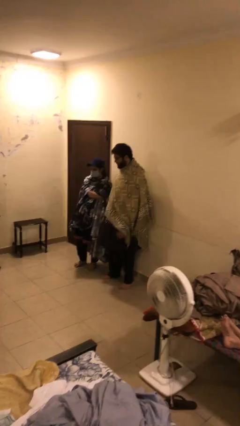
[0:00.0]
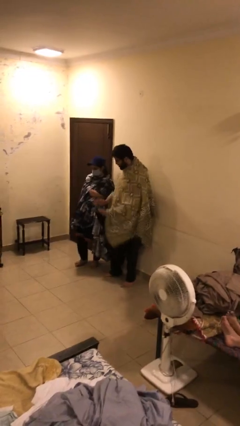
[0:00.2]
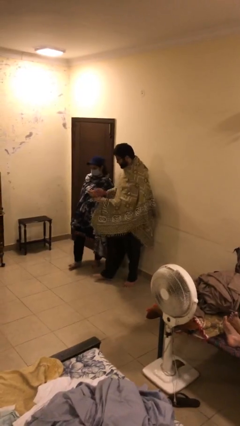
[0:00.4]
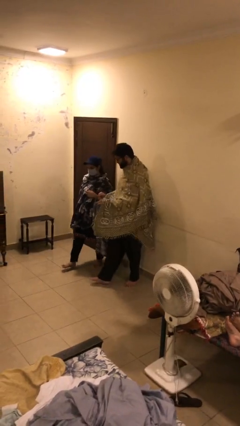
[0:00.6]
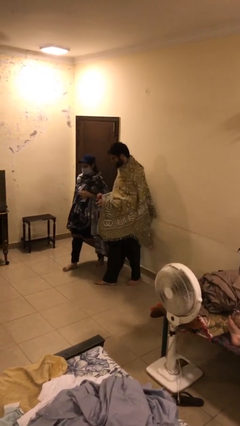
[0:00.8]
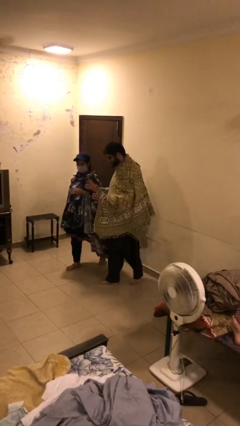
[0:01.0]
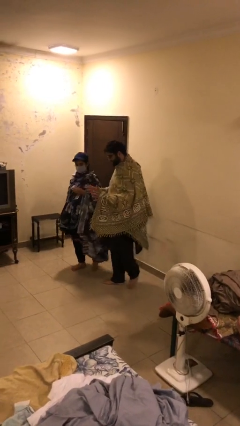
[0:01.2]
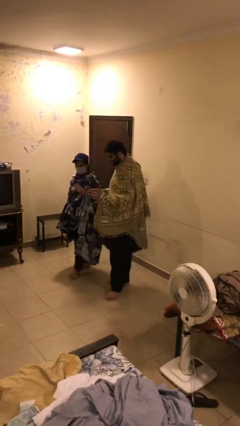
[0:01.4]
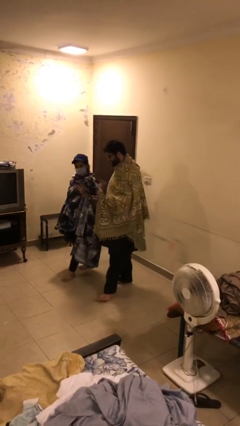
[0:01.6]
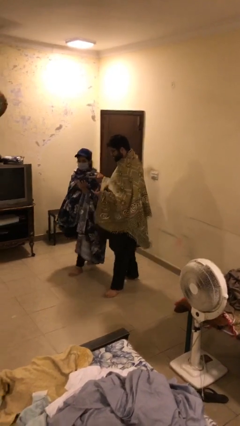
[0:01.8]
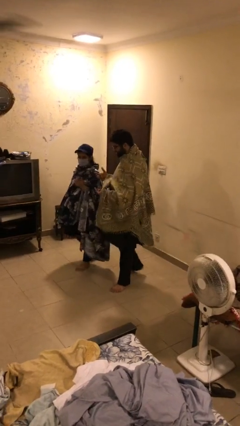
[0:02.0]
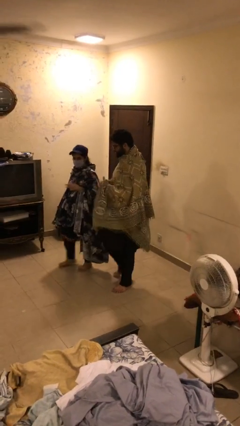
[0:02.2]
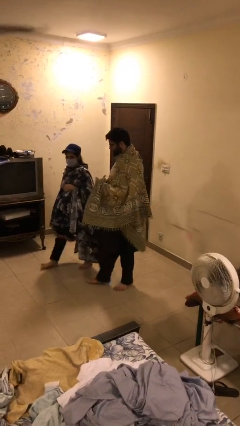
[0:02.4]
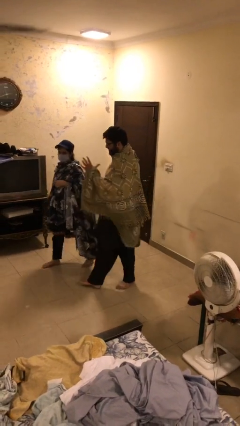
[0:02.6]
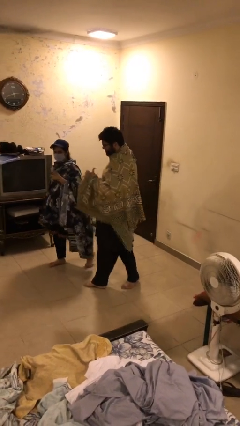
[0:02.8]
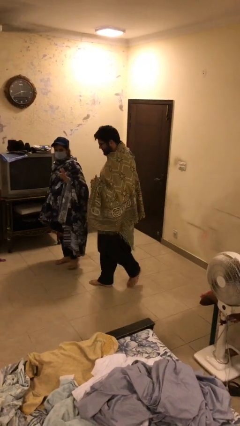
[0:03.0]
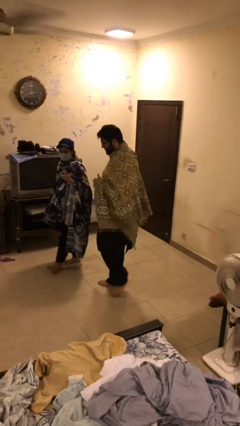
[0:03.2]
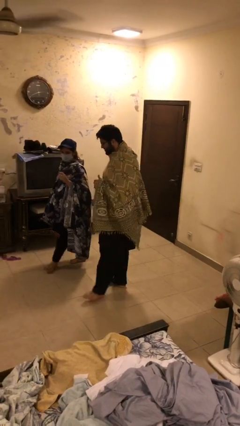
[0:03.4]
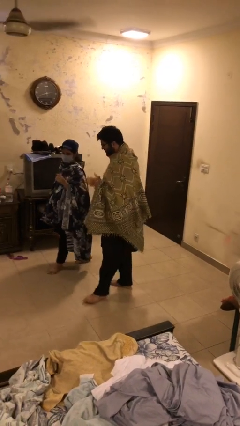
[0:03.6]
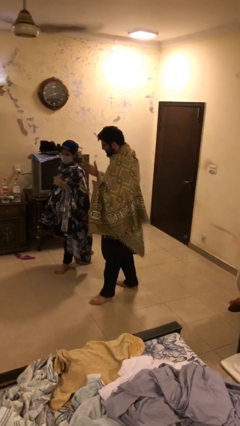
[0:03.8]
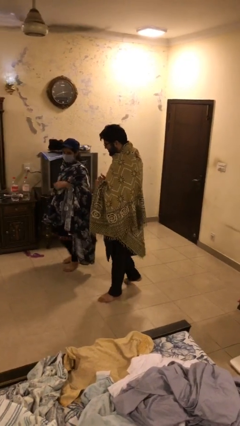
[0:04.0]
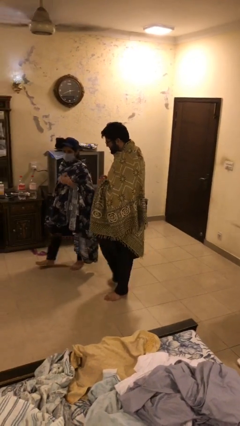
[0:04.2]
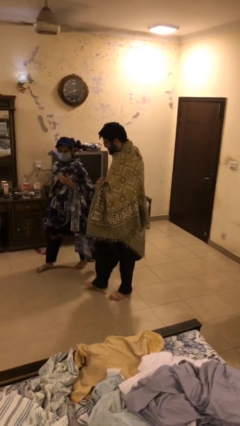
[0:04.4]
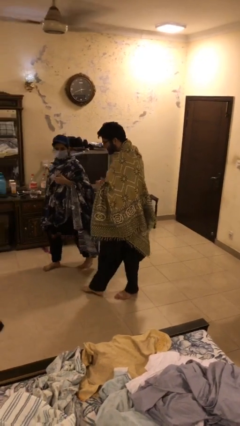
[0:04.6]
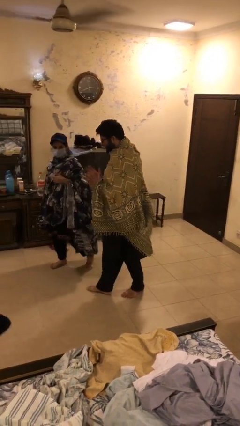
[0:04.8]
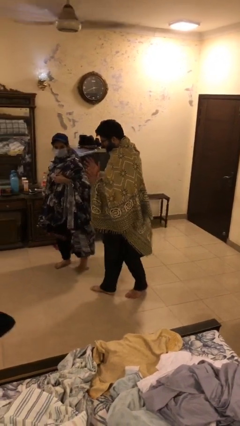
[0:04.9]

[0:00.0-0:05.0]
person talks to person

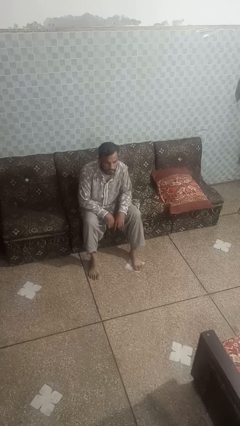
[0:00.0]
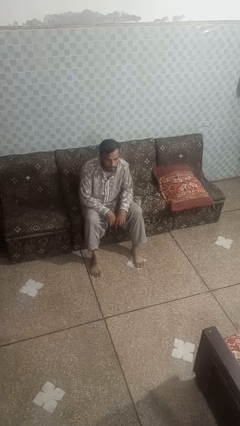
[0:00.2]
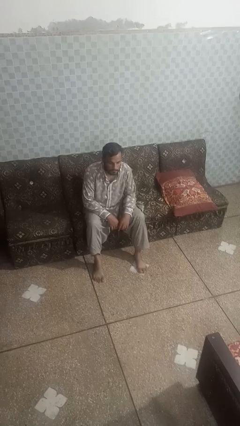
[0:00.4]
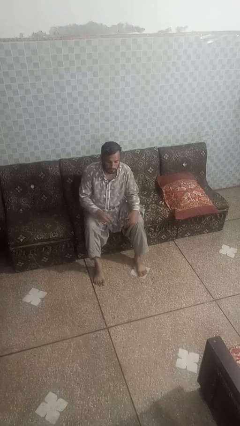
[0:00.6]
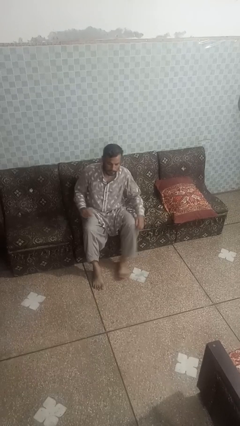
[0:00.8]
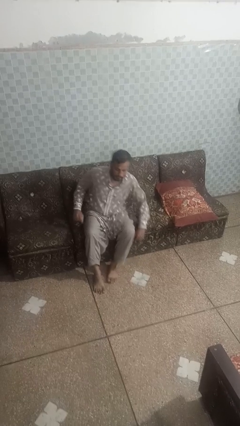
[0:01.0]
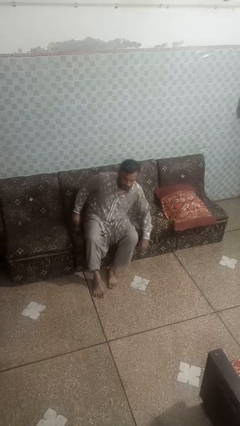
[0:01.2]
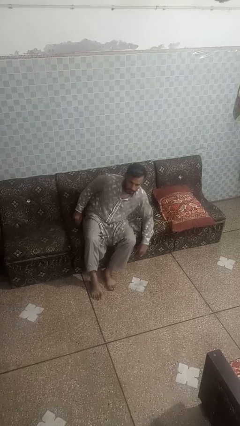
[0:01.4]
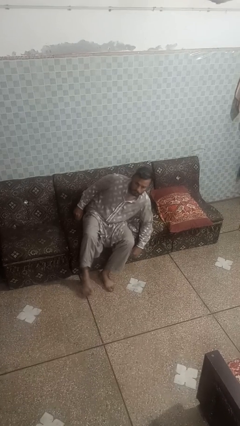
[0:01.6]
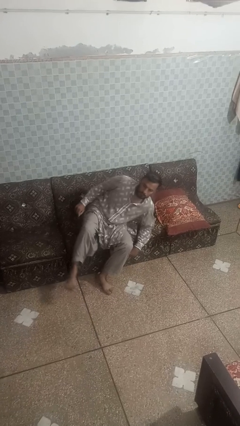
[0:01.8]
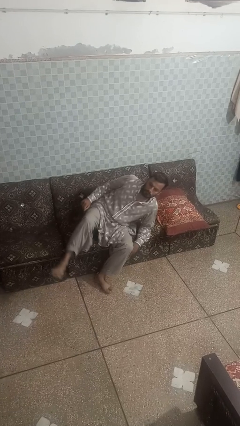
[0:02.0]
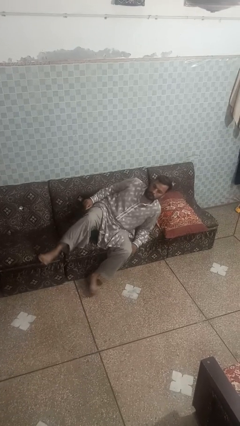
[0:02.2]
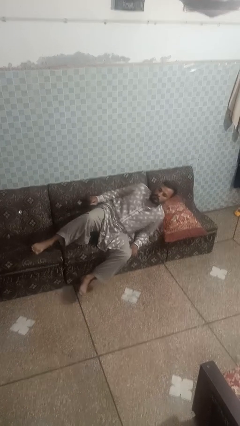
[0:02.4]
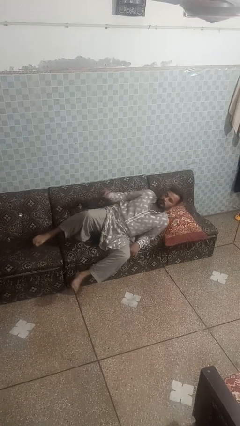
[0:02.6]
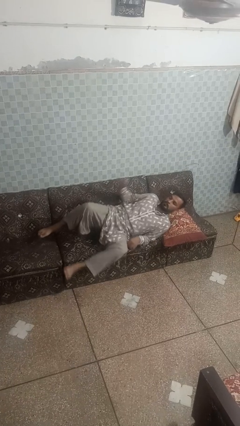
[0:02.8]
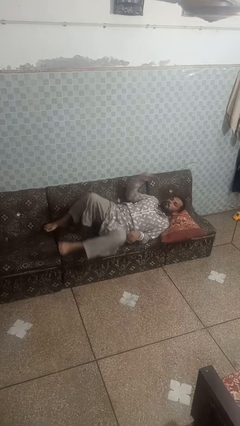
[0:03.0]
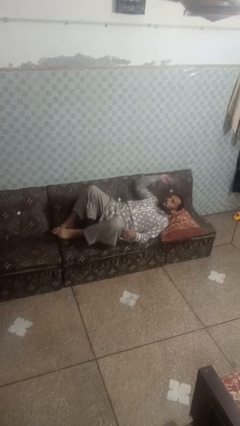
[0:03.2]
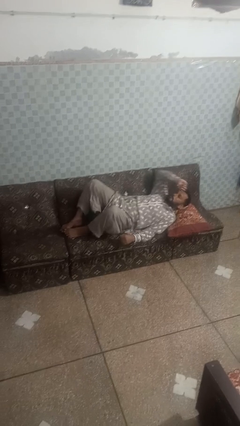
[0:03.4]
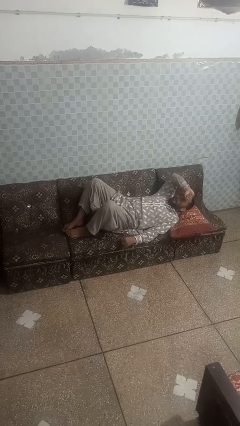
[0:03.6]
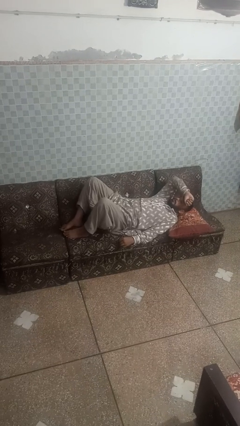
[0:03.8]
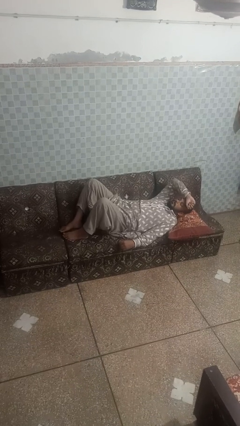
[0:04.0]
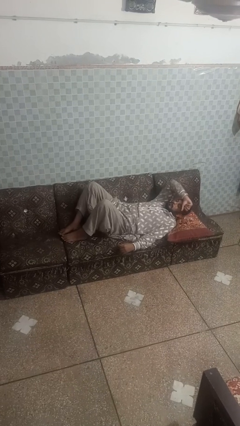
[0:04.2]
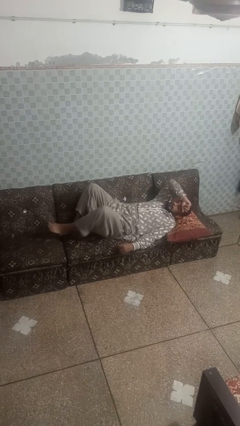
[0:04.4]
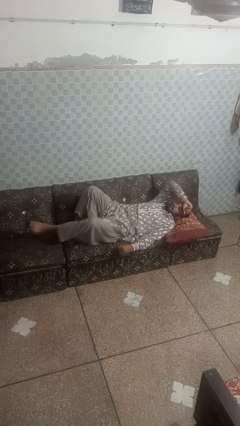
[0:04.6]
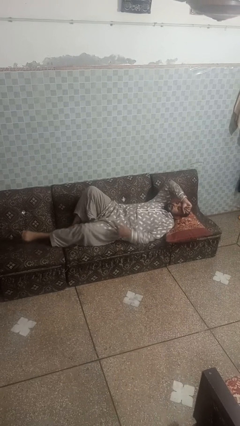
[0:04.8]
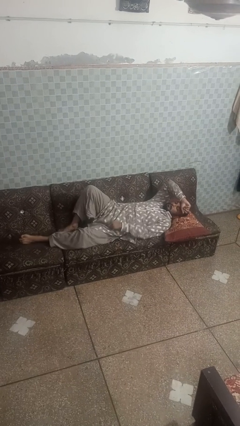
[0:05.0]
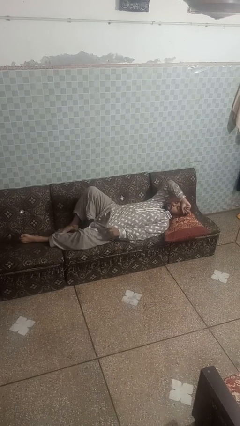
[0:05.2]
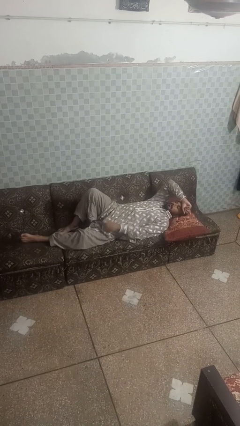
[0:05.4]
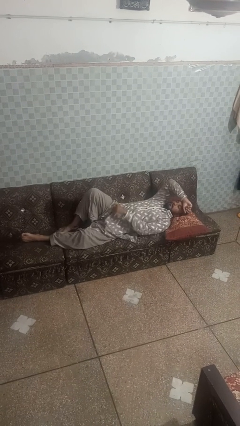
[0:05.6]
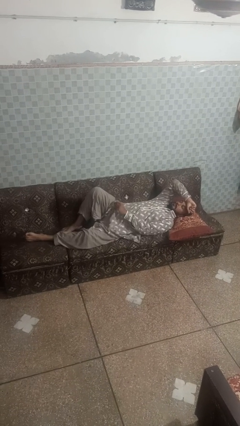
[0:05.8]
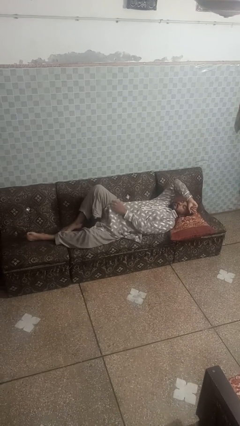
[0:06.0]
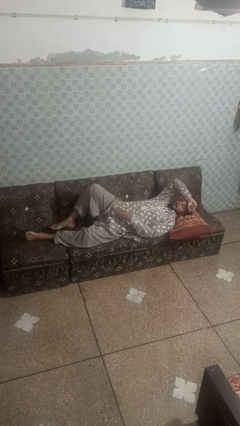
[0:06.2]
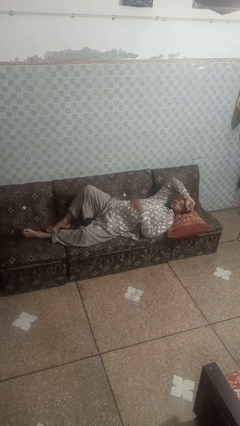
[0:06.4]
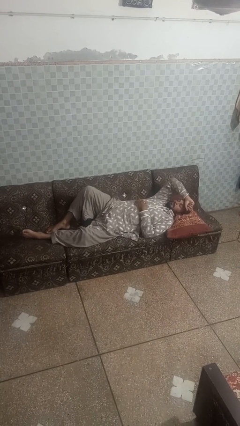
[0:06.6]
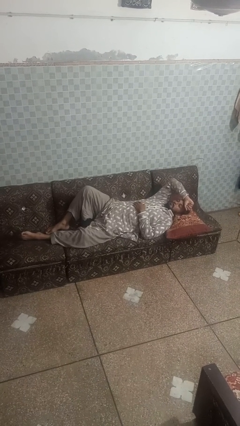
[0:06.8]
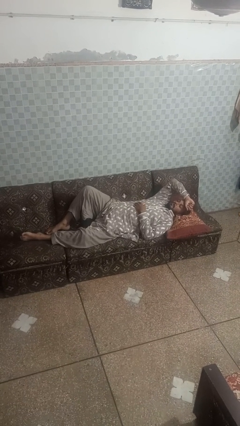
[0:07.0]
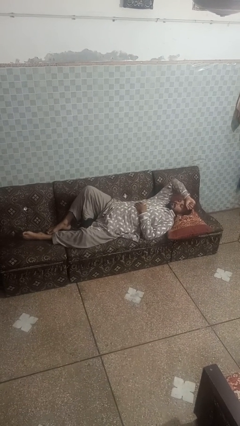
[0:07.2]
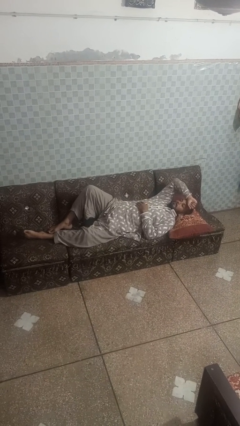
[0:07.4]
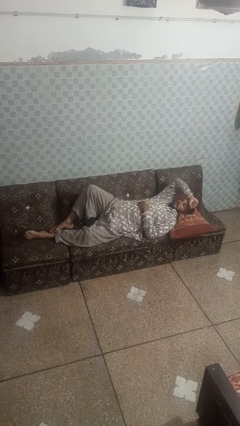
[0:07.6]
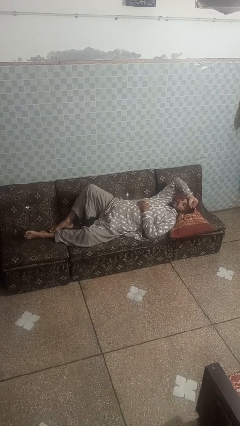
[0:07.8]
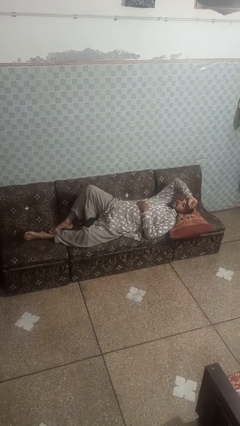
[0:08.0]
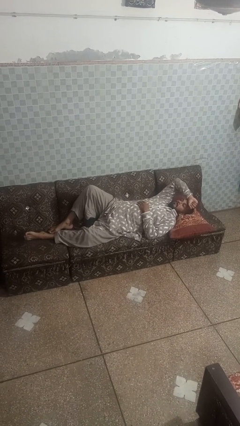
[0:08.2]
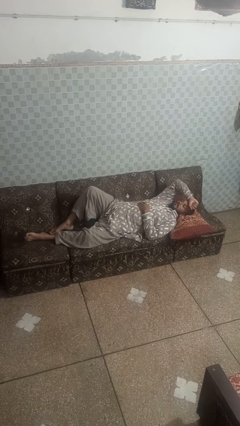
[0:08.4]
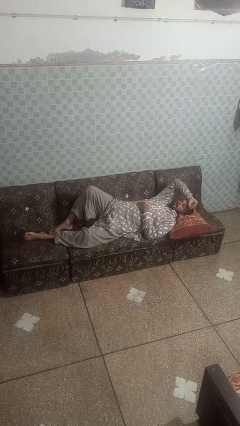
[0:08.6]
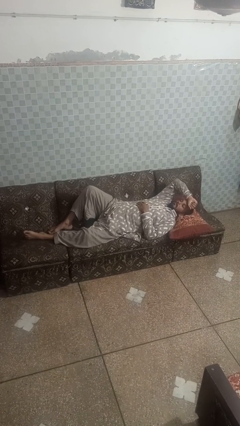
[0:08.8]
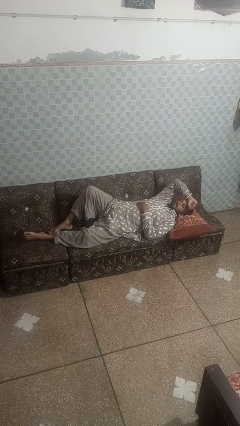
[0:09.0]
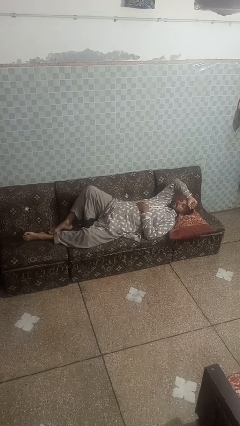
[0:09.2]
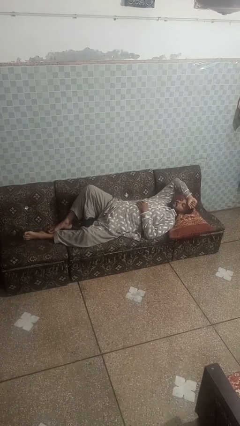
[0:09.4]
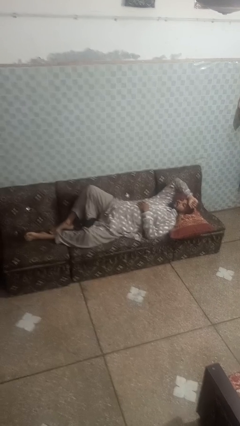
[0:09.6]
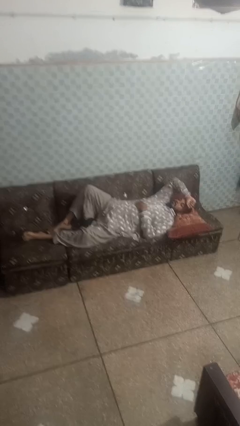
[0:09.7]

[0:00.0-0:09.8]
person lies down on couch

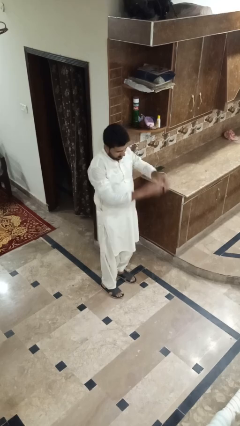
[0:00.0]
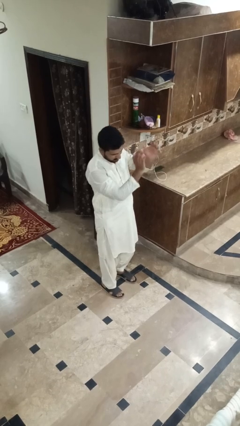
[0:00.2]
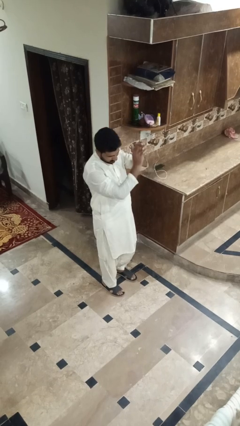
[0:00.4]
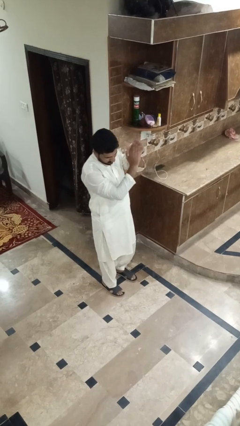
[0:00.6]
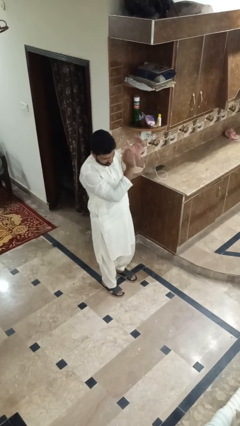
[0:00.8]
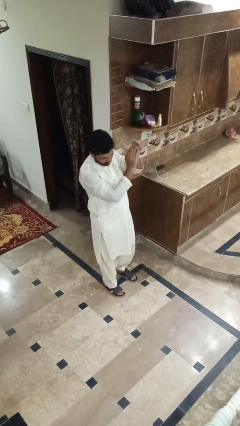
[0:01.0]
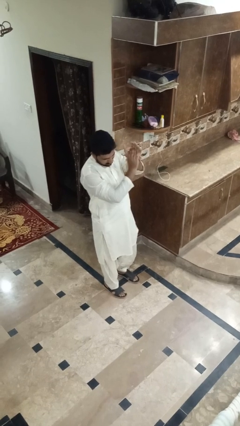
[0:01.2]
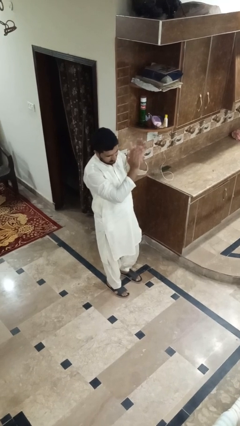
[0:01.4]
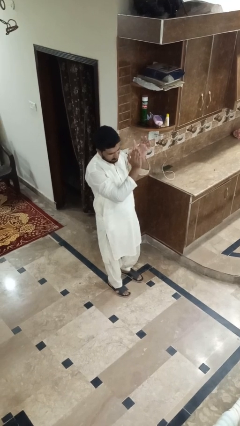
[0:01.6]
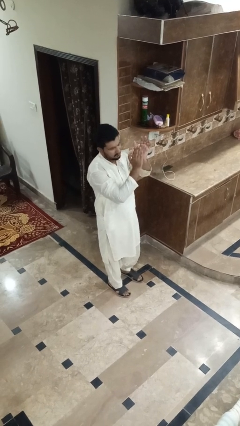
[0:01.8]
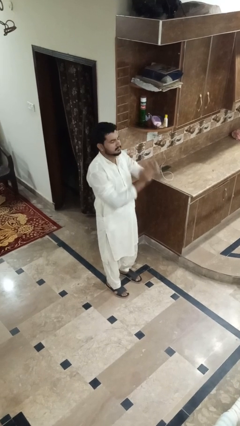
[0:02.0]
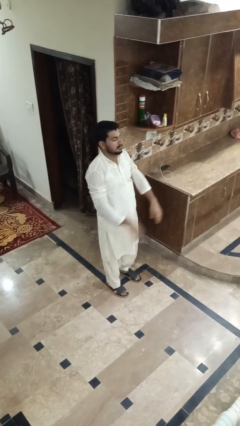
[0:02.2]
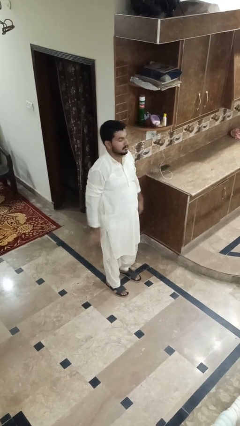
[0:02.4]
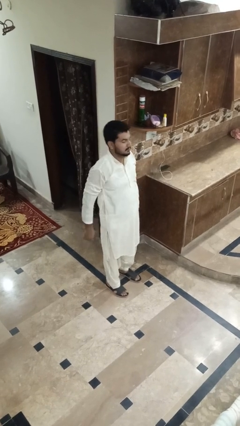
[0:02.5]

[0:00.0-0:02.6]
person claps hands
